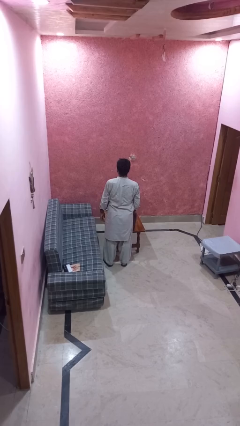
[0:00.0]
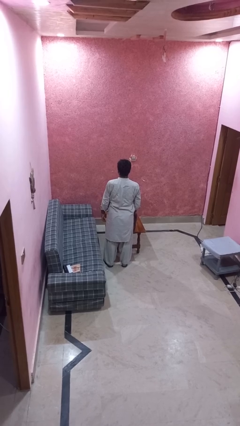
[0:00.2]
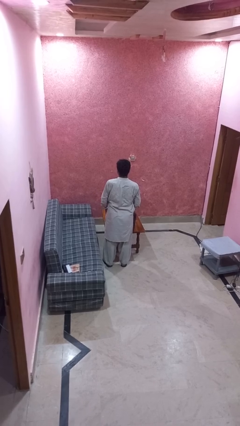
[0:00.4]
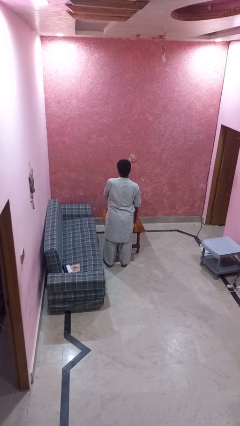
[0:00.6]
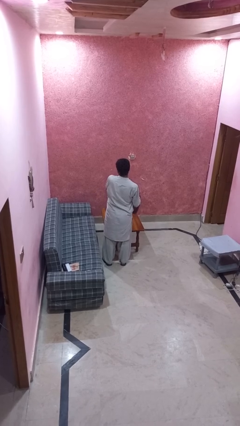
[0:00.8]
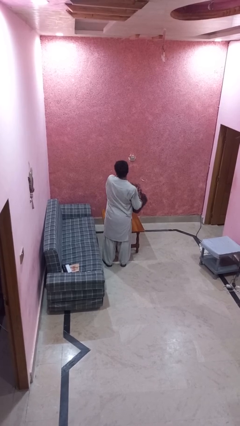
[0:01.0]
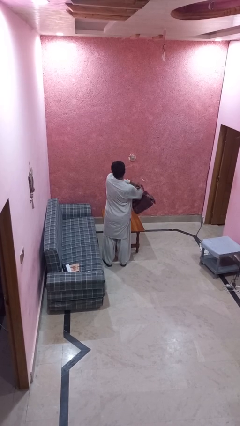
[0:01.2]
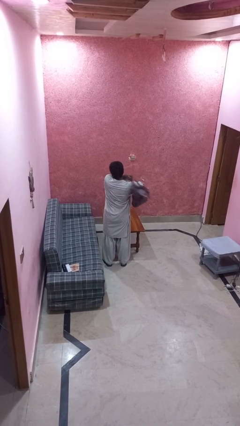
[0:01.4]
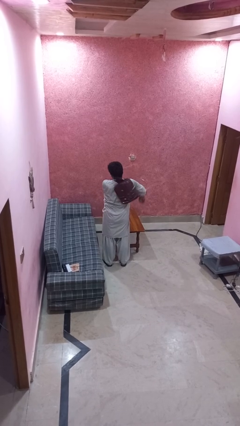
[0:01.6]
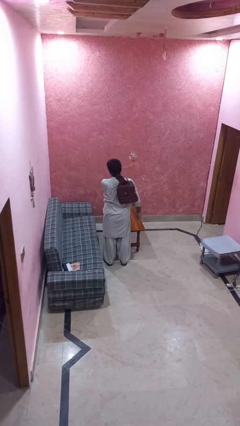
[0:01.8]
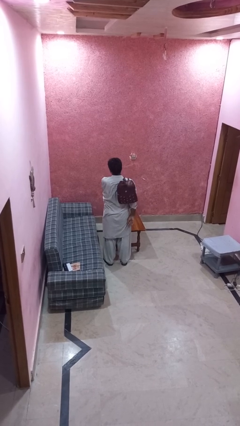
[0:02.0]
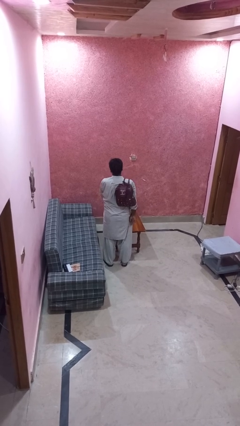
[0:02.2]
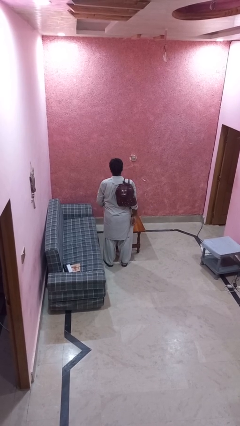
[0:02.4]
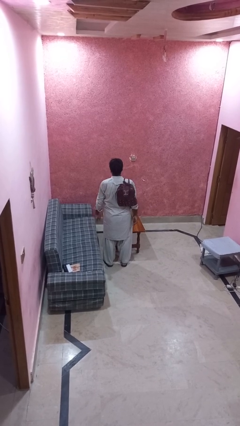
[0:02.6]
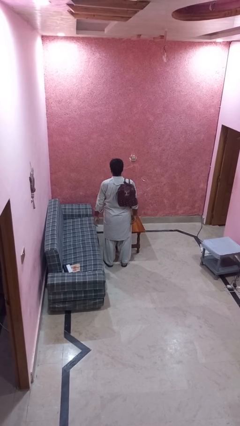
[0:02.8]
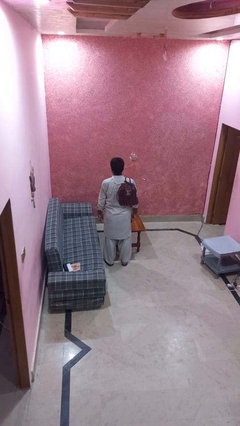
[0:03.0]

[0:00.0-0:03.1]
person puts on backpack

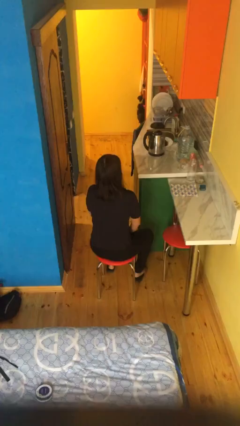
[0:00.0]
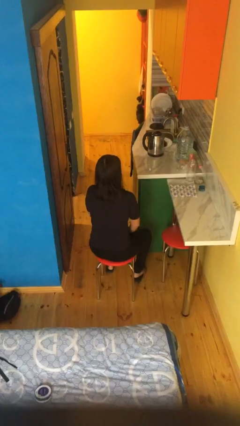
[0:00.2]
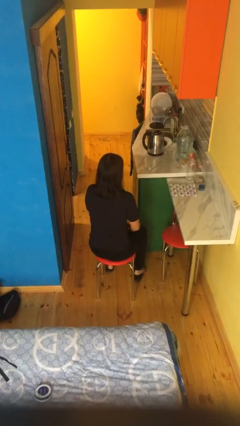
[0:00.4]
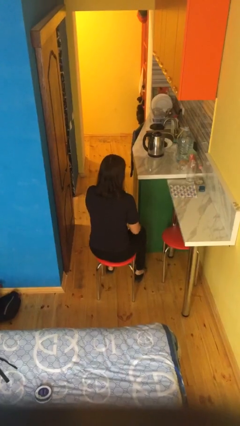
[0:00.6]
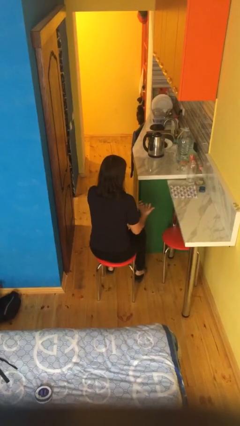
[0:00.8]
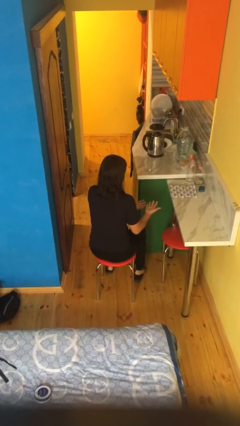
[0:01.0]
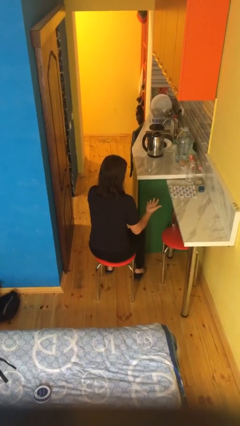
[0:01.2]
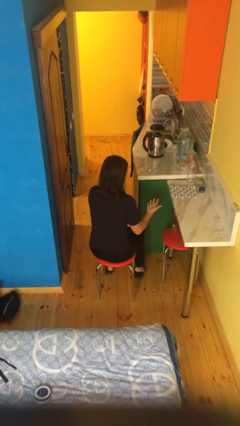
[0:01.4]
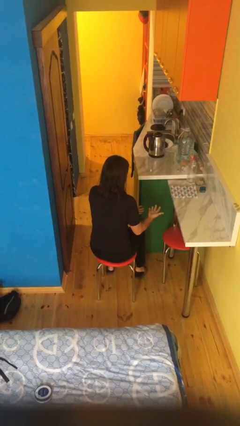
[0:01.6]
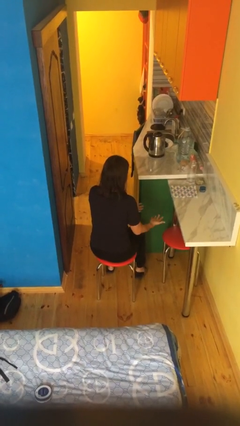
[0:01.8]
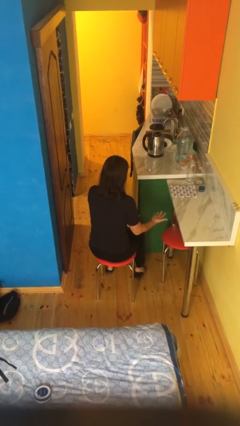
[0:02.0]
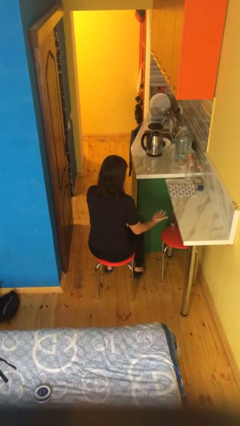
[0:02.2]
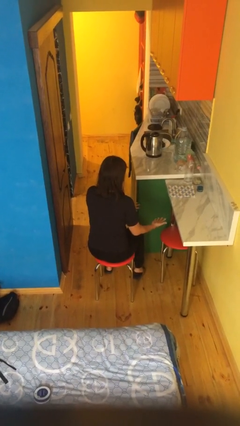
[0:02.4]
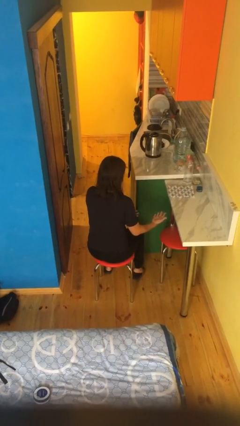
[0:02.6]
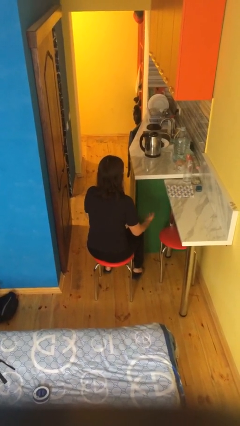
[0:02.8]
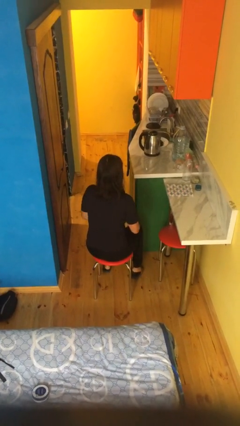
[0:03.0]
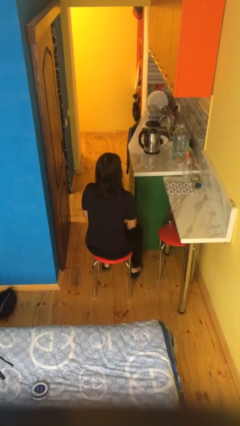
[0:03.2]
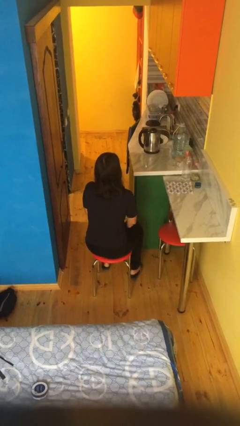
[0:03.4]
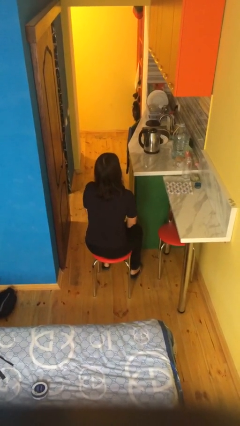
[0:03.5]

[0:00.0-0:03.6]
person looks at hands in lap

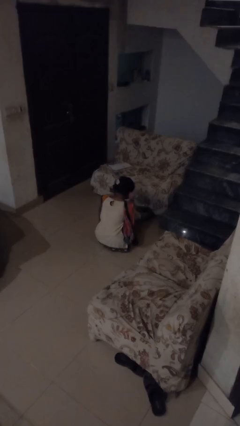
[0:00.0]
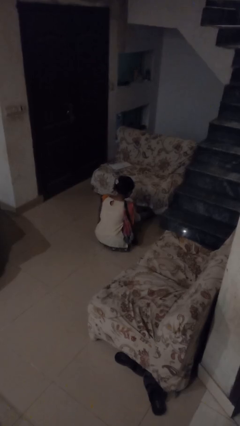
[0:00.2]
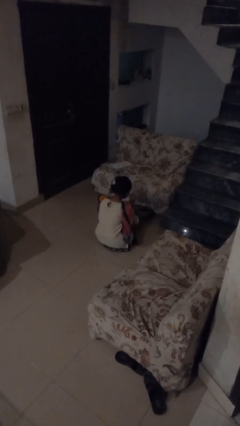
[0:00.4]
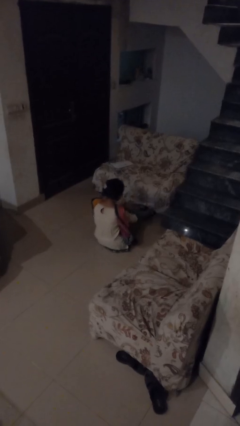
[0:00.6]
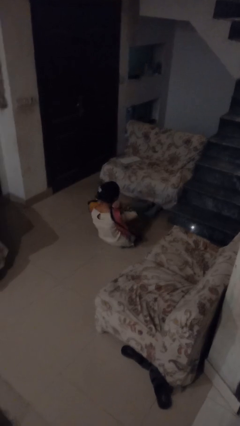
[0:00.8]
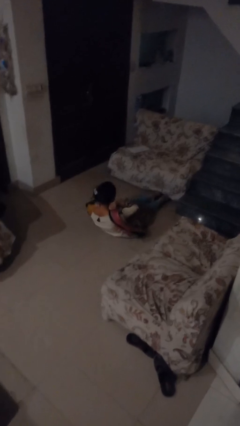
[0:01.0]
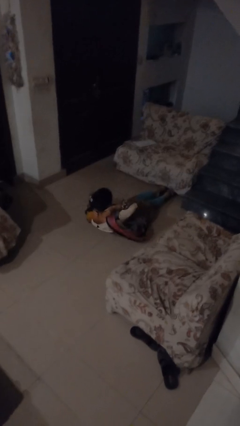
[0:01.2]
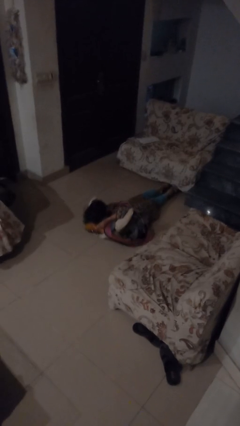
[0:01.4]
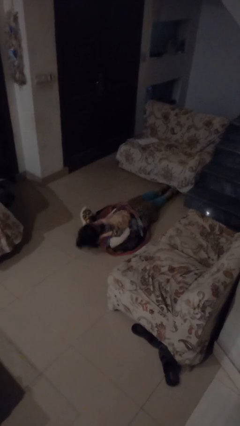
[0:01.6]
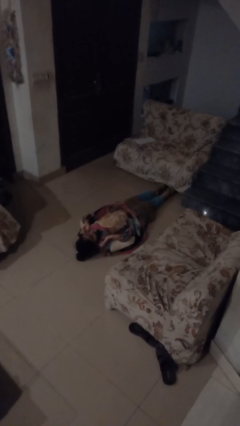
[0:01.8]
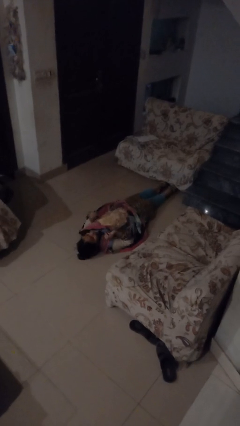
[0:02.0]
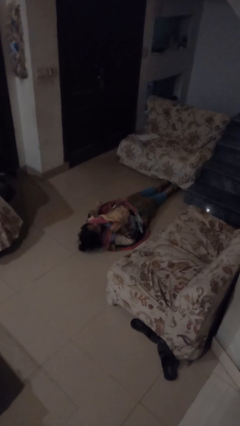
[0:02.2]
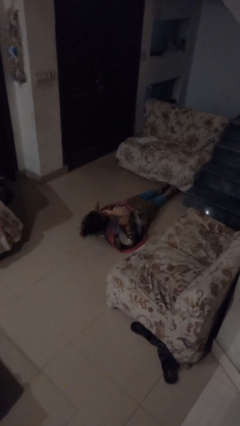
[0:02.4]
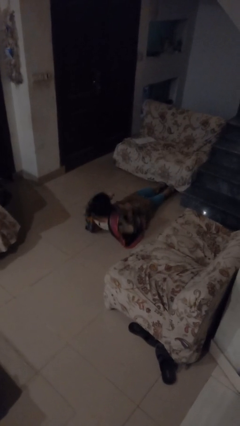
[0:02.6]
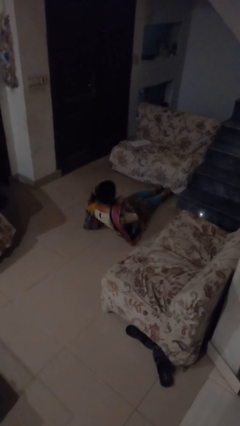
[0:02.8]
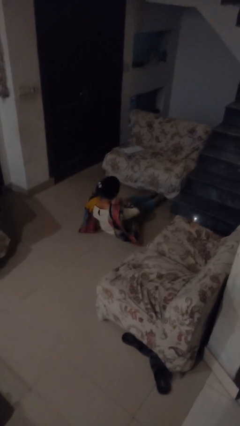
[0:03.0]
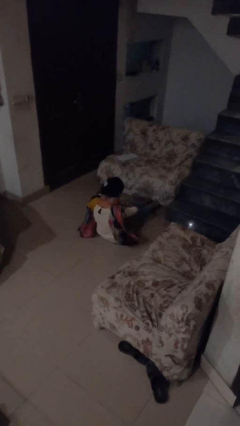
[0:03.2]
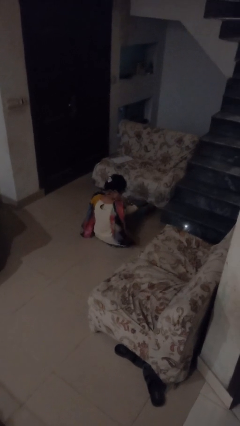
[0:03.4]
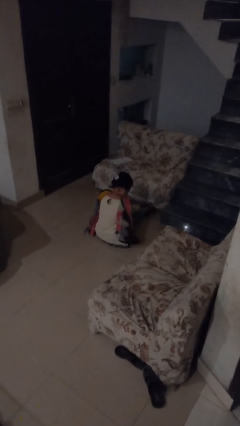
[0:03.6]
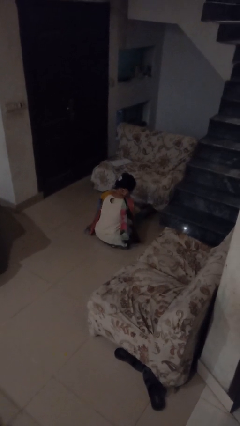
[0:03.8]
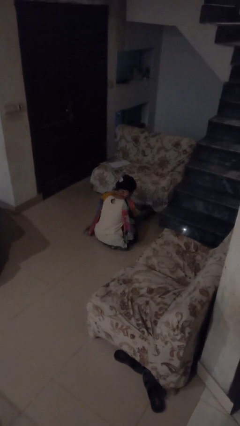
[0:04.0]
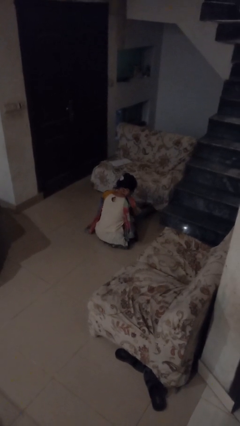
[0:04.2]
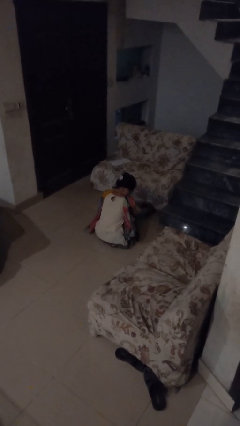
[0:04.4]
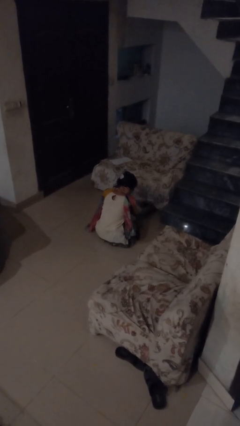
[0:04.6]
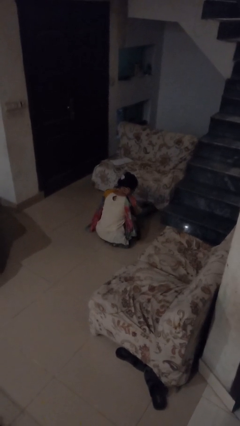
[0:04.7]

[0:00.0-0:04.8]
person exercises with situp

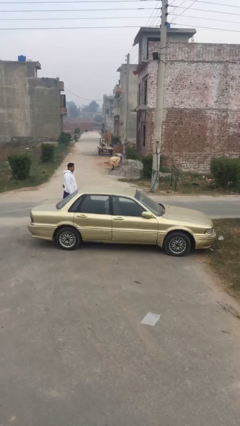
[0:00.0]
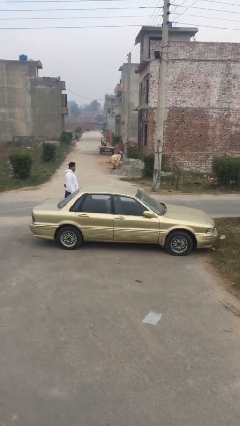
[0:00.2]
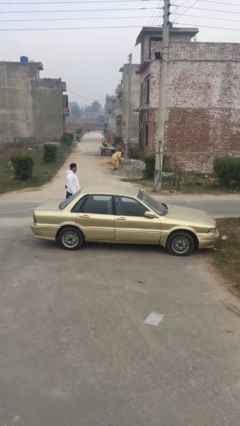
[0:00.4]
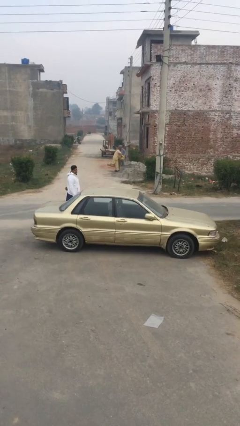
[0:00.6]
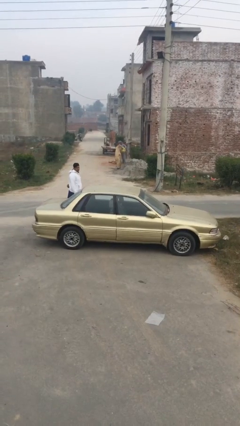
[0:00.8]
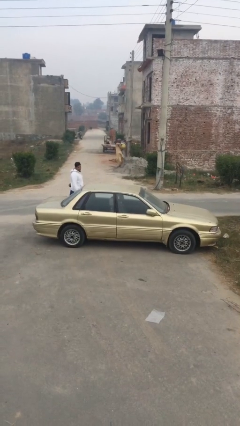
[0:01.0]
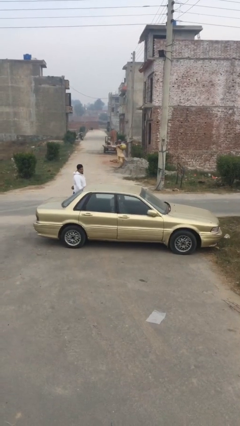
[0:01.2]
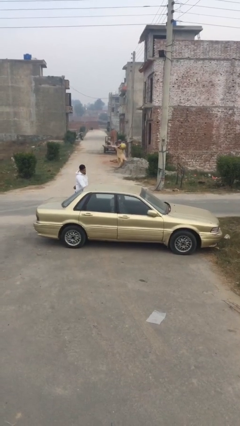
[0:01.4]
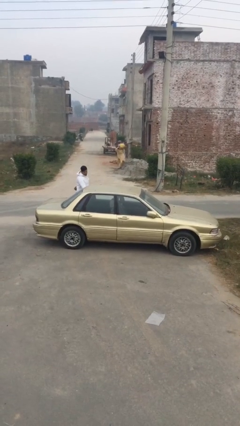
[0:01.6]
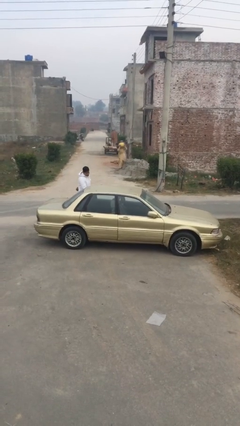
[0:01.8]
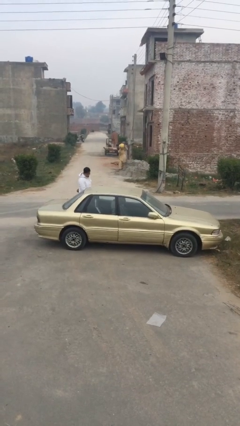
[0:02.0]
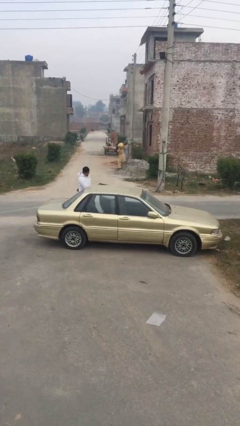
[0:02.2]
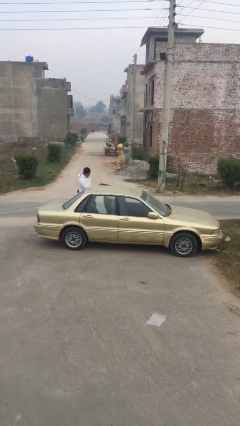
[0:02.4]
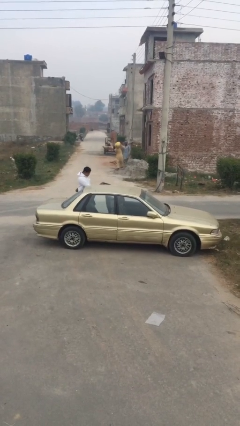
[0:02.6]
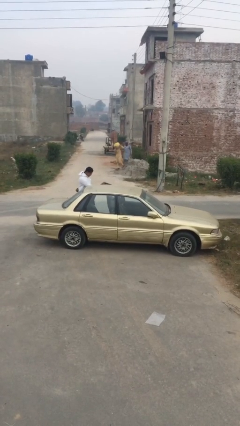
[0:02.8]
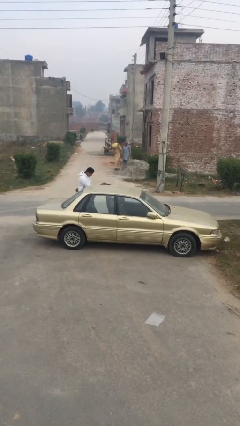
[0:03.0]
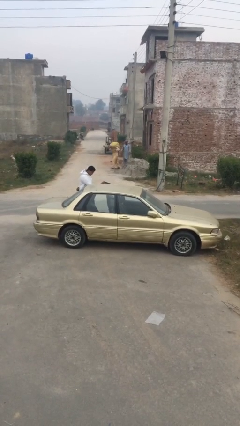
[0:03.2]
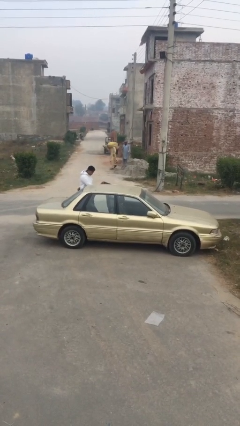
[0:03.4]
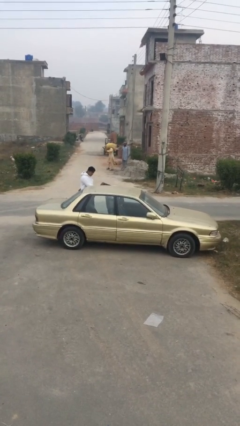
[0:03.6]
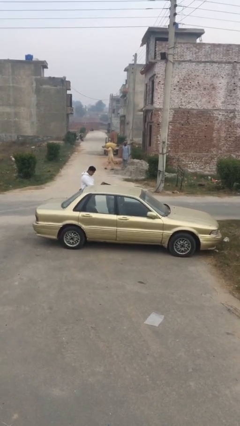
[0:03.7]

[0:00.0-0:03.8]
person opens car door

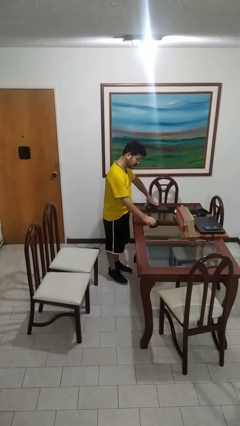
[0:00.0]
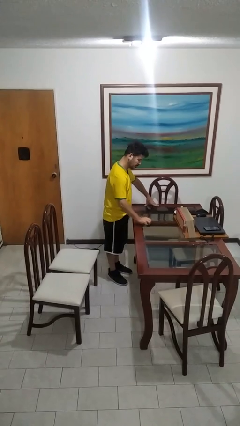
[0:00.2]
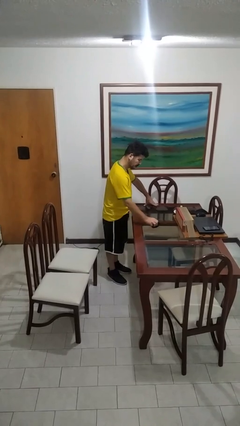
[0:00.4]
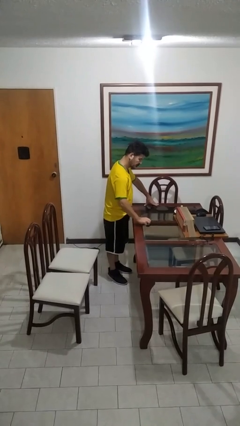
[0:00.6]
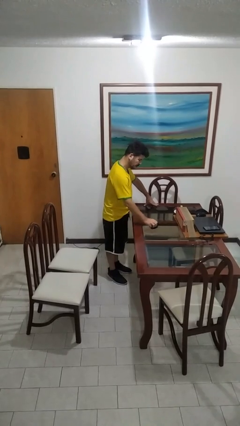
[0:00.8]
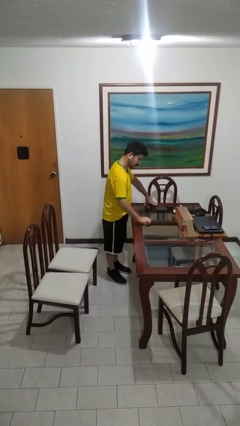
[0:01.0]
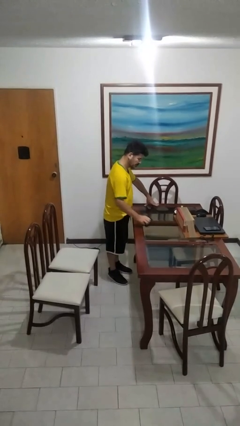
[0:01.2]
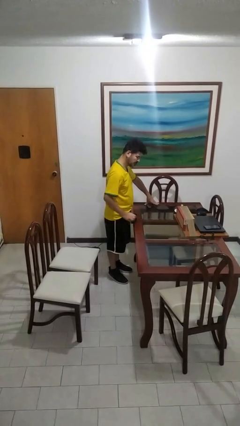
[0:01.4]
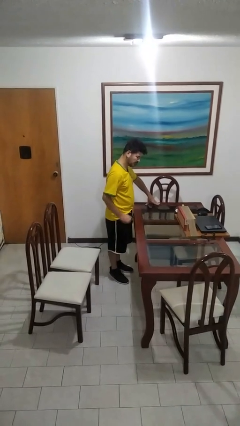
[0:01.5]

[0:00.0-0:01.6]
person cleans table with rag

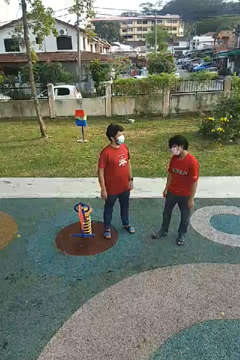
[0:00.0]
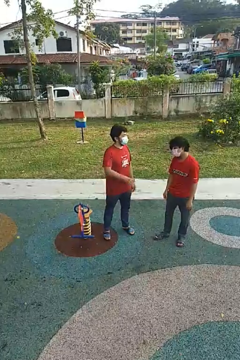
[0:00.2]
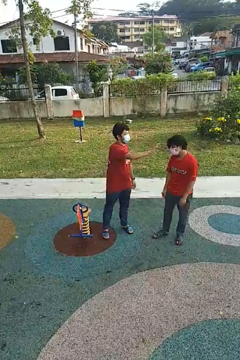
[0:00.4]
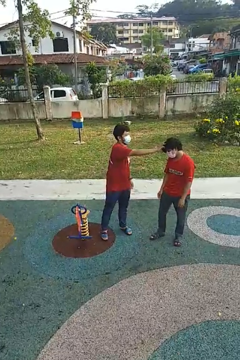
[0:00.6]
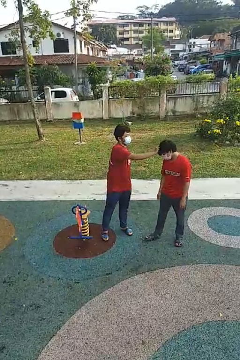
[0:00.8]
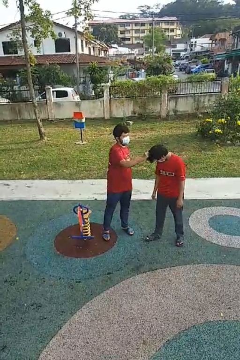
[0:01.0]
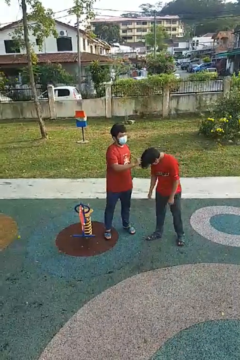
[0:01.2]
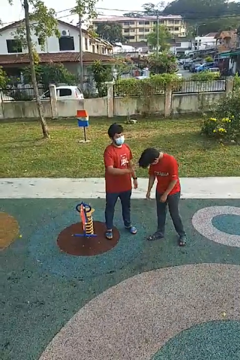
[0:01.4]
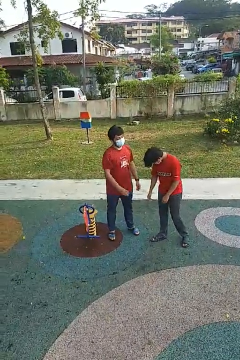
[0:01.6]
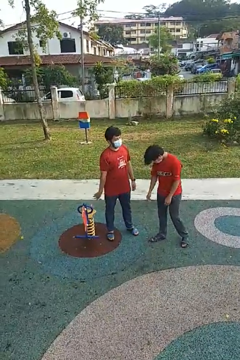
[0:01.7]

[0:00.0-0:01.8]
person grabs person by hair
